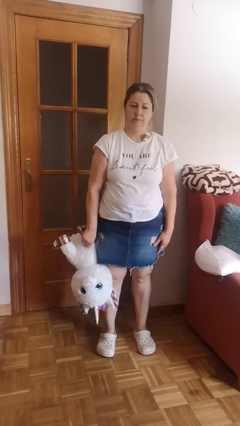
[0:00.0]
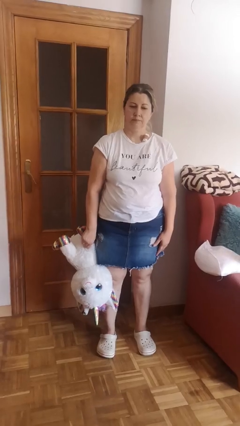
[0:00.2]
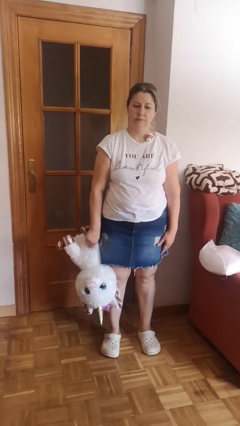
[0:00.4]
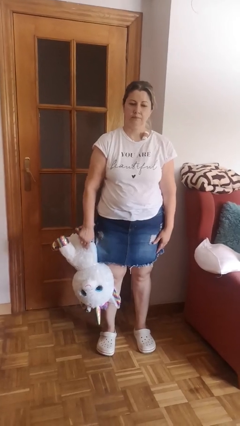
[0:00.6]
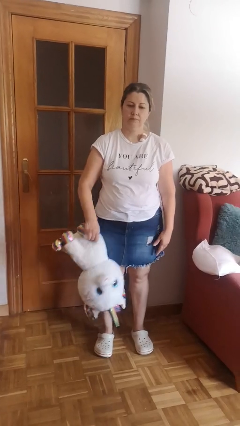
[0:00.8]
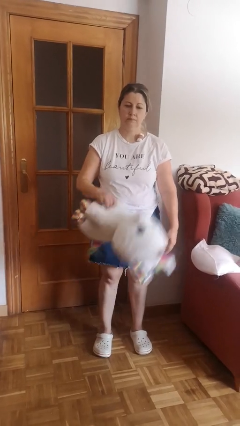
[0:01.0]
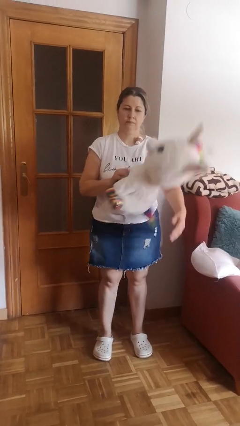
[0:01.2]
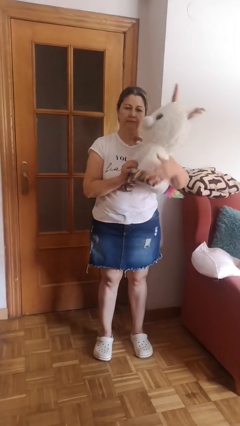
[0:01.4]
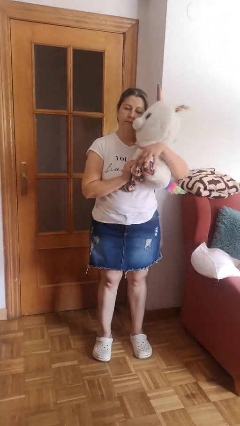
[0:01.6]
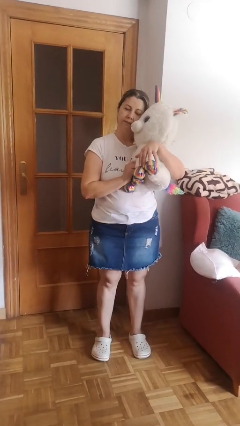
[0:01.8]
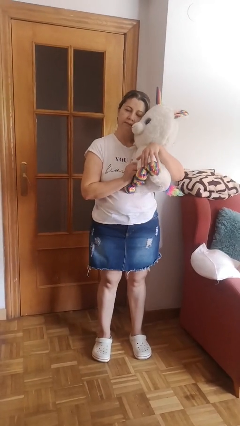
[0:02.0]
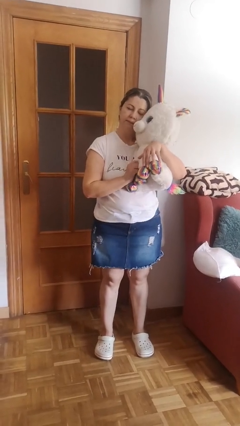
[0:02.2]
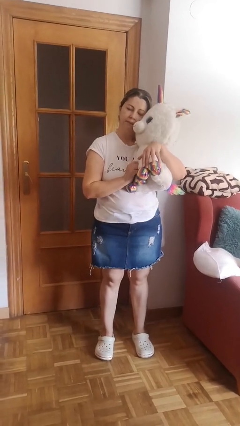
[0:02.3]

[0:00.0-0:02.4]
person hugs stuffed animal

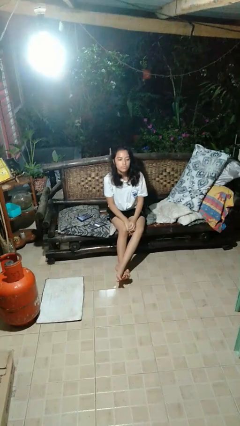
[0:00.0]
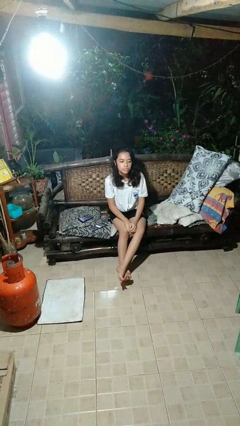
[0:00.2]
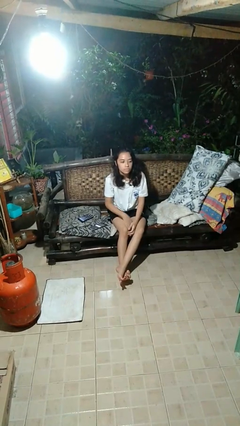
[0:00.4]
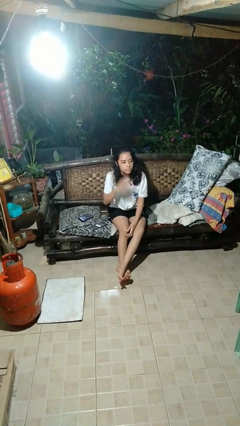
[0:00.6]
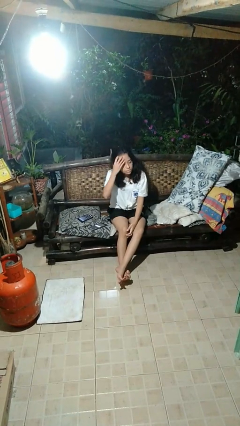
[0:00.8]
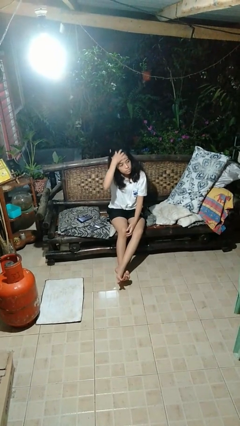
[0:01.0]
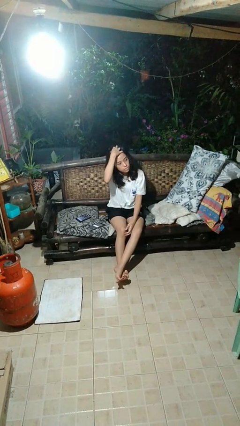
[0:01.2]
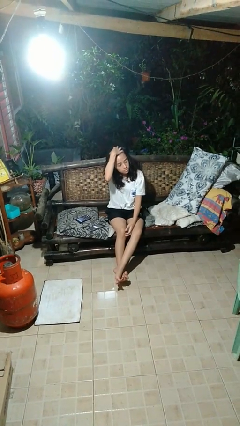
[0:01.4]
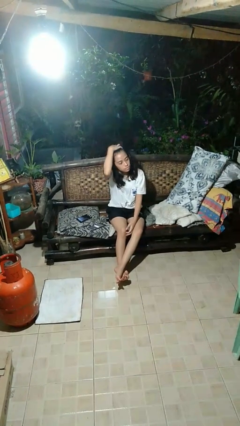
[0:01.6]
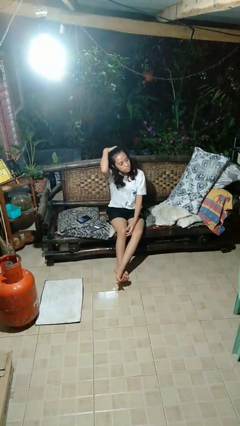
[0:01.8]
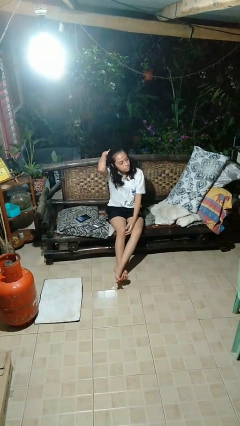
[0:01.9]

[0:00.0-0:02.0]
person strokes hair

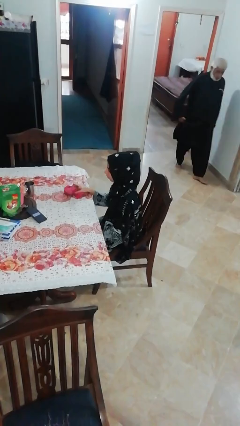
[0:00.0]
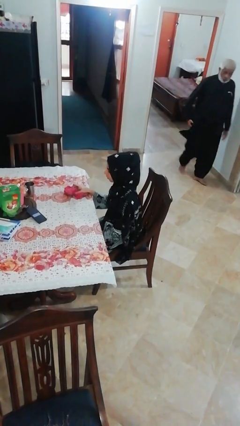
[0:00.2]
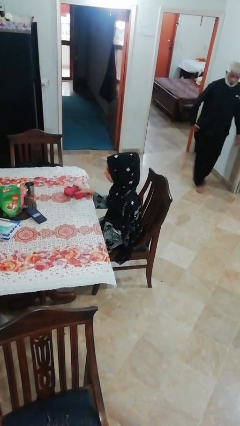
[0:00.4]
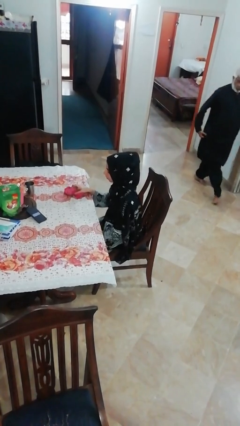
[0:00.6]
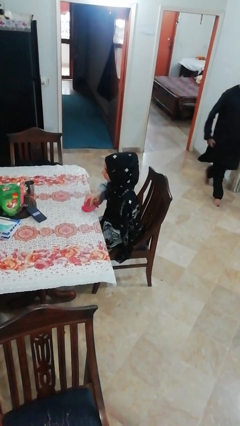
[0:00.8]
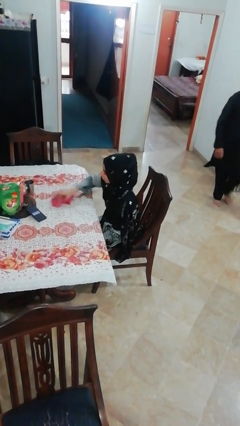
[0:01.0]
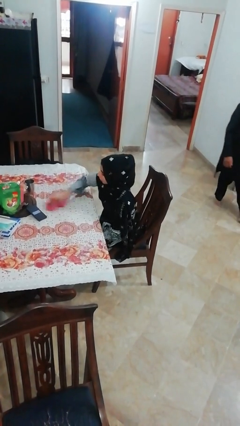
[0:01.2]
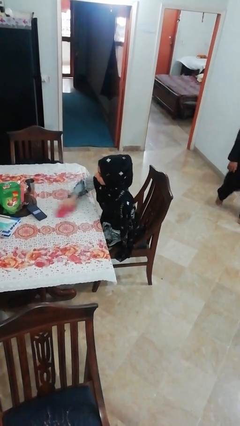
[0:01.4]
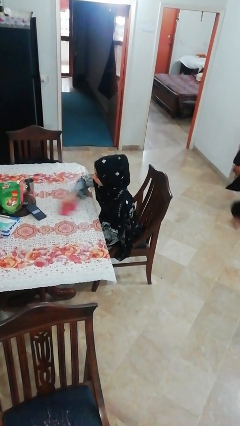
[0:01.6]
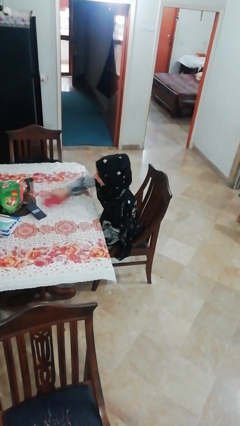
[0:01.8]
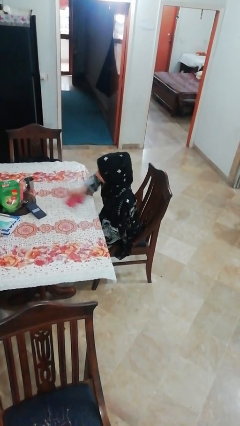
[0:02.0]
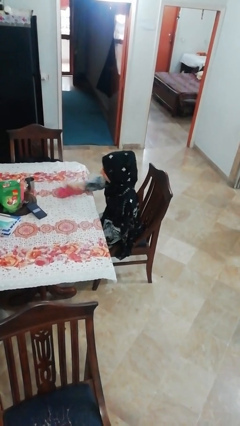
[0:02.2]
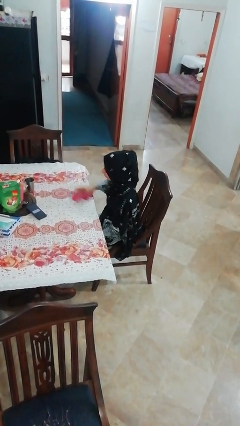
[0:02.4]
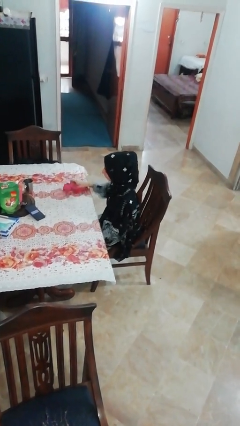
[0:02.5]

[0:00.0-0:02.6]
person cleans table with rag

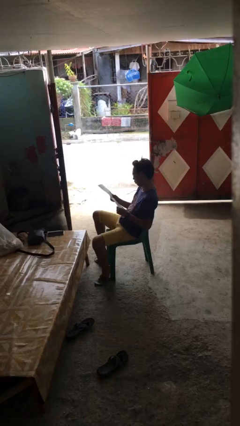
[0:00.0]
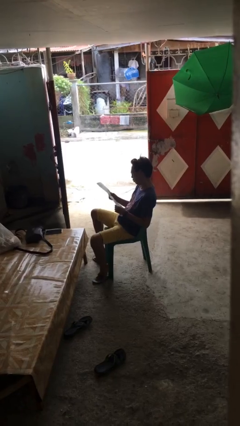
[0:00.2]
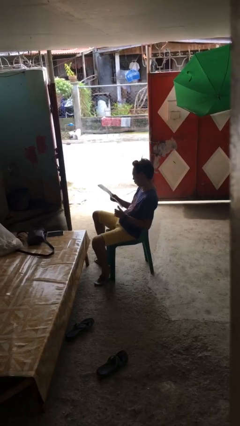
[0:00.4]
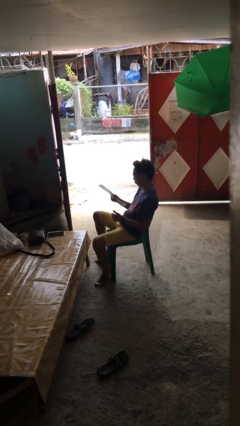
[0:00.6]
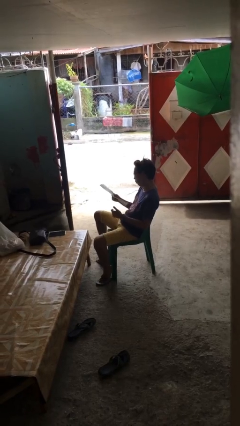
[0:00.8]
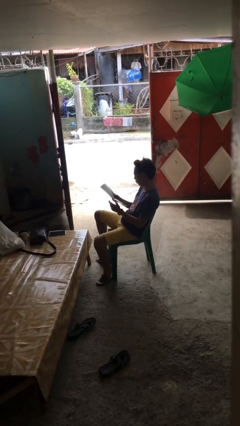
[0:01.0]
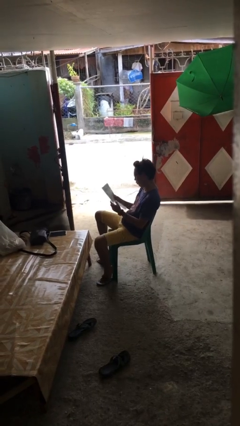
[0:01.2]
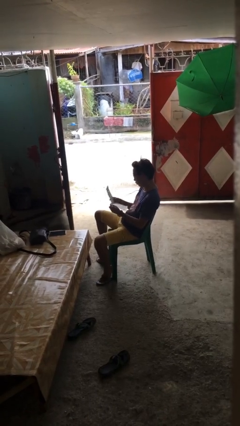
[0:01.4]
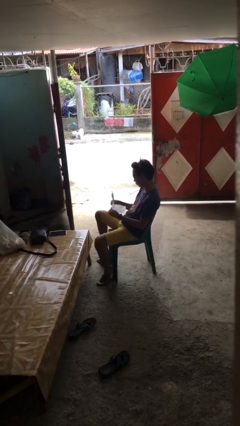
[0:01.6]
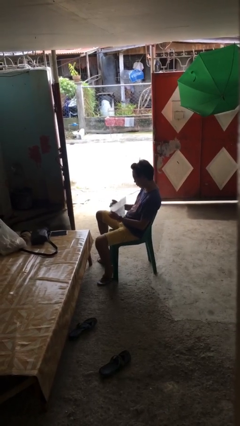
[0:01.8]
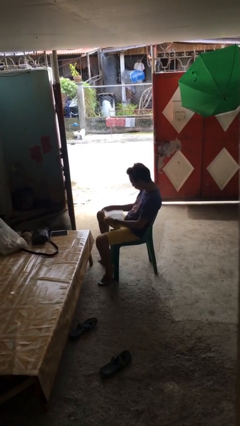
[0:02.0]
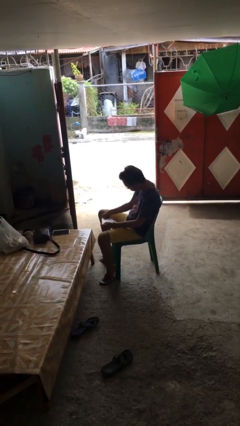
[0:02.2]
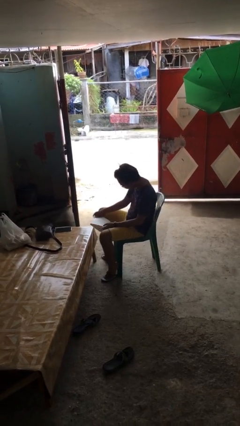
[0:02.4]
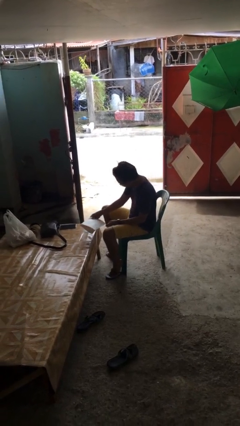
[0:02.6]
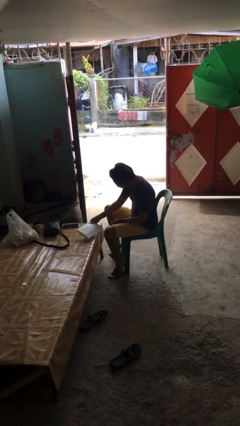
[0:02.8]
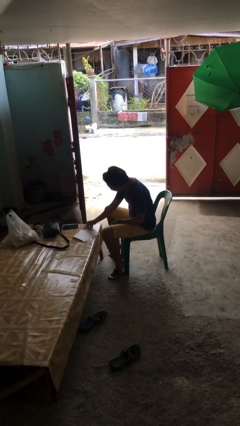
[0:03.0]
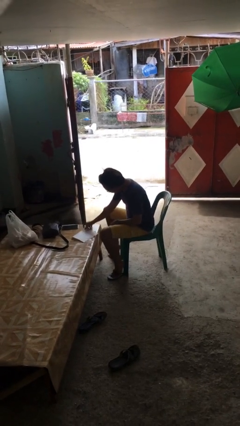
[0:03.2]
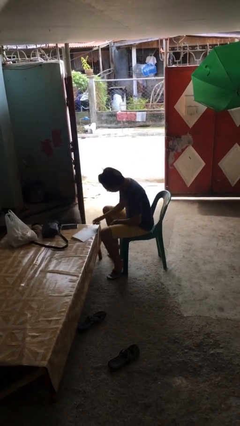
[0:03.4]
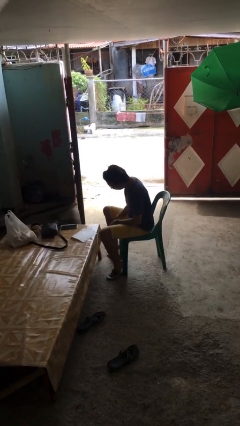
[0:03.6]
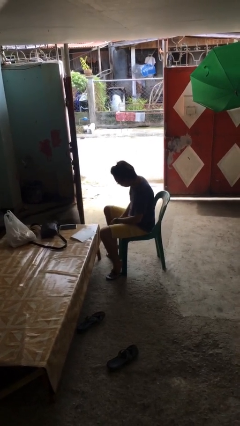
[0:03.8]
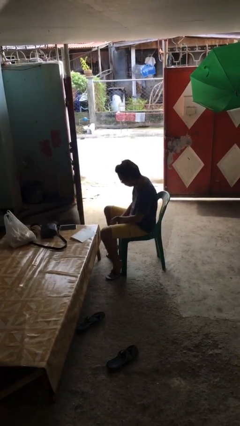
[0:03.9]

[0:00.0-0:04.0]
person puts down object on table

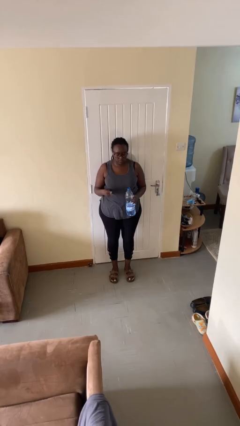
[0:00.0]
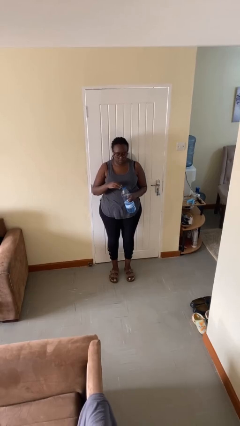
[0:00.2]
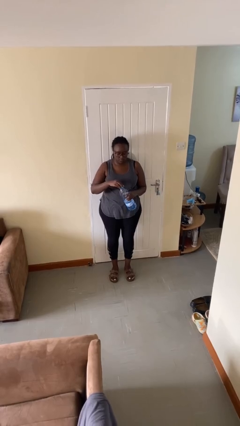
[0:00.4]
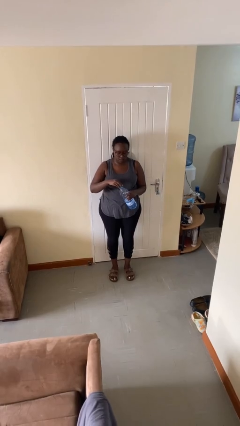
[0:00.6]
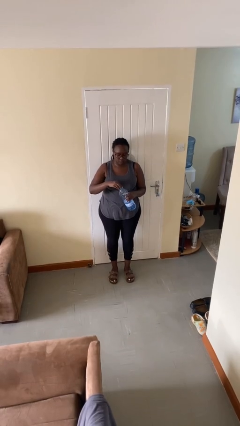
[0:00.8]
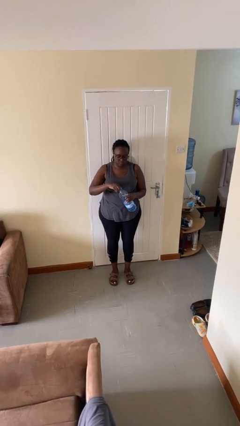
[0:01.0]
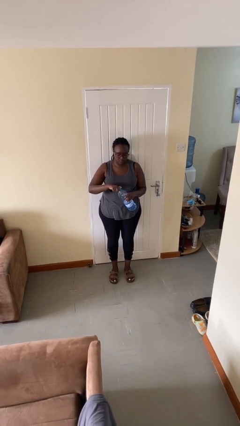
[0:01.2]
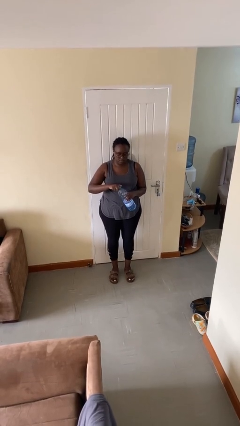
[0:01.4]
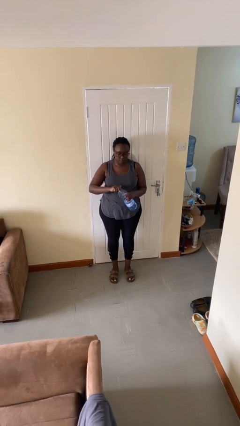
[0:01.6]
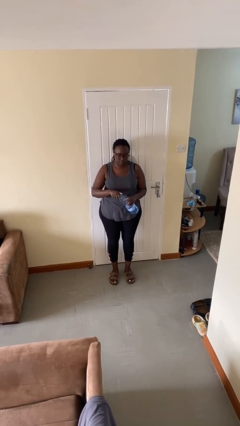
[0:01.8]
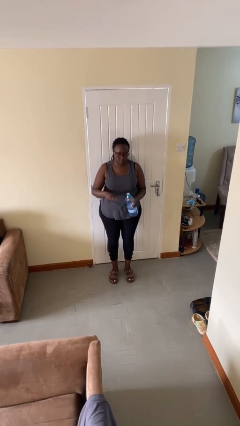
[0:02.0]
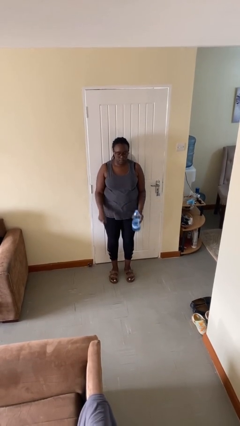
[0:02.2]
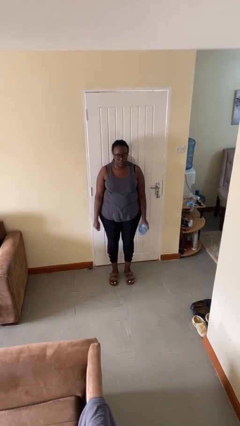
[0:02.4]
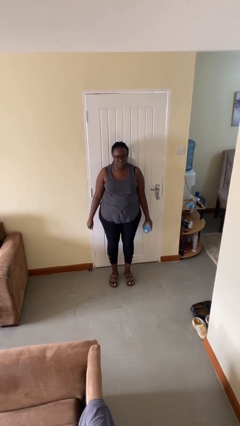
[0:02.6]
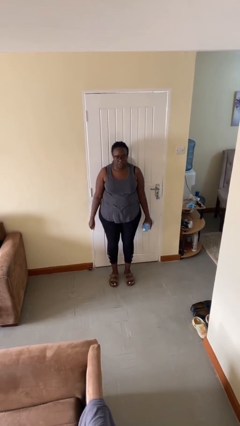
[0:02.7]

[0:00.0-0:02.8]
person screws lid to bottle

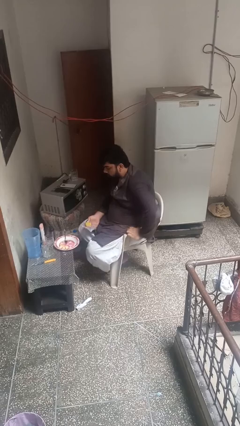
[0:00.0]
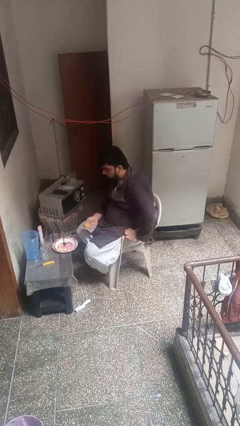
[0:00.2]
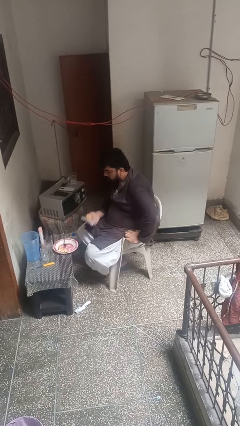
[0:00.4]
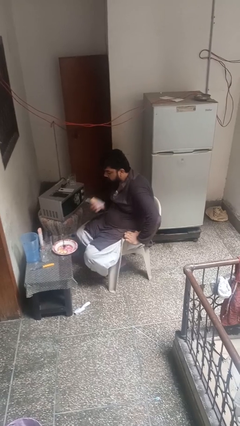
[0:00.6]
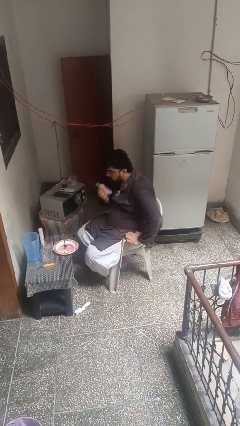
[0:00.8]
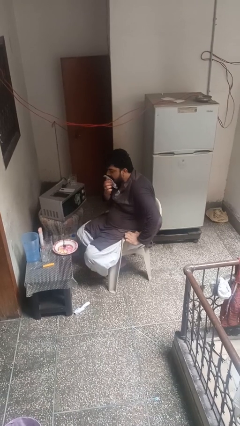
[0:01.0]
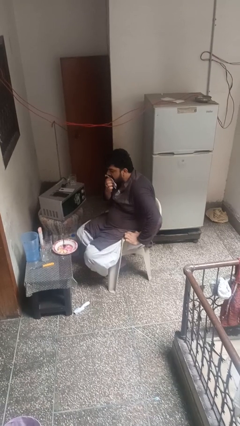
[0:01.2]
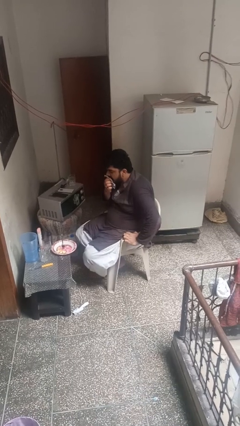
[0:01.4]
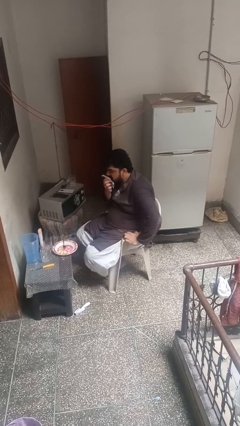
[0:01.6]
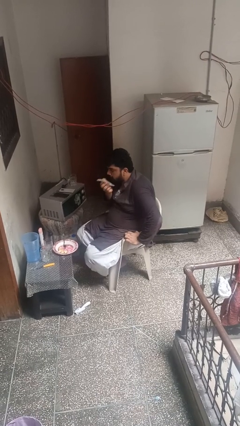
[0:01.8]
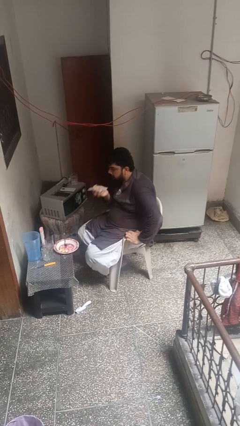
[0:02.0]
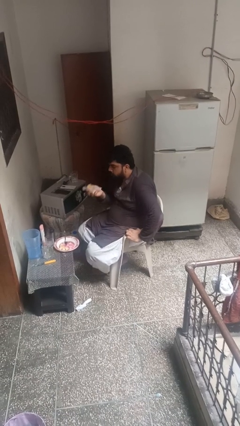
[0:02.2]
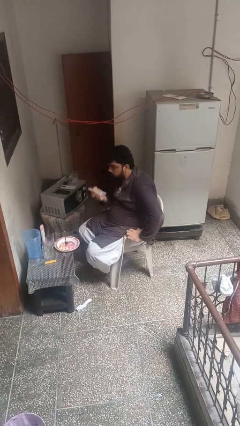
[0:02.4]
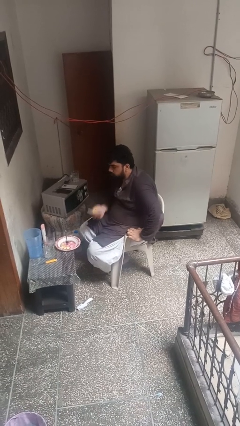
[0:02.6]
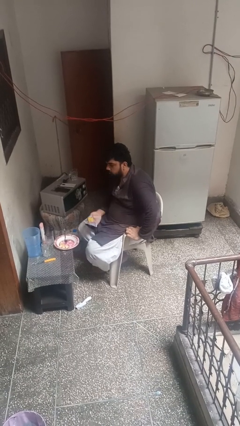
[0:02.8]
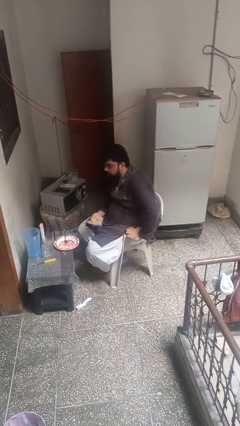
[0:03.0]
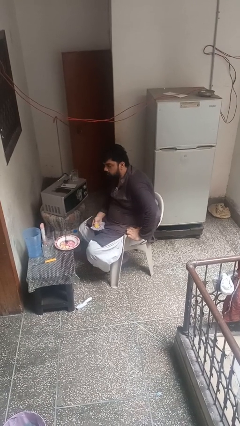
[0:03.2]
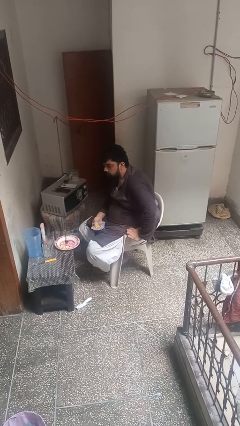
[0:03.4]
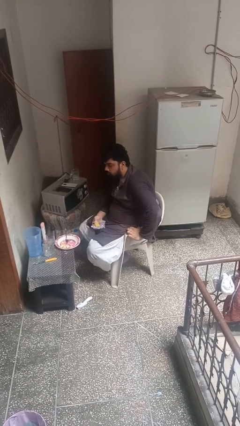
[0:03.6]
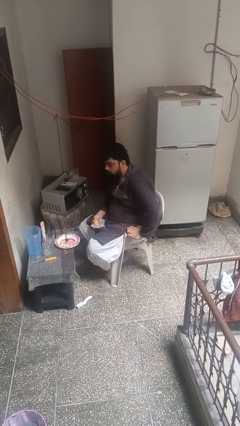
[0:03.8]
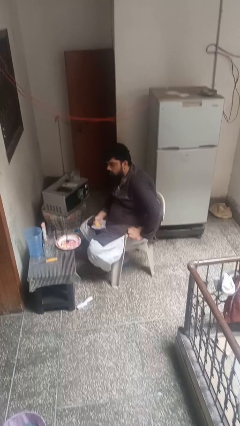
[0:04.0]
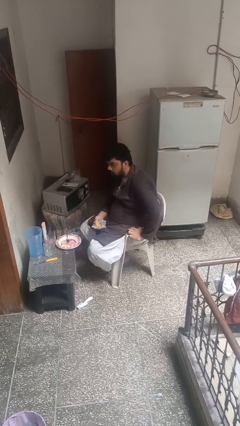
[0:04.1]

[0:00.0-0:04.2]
person eats with hands
